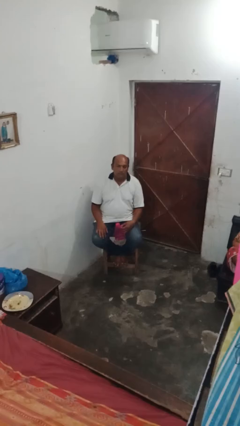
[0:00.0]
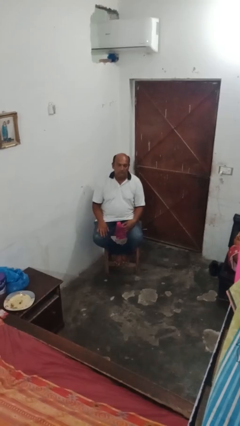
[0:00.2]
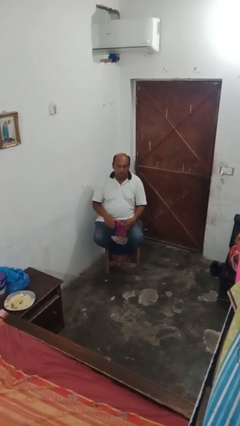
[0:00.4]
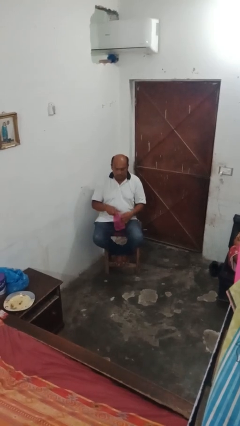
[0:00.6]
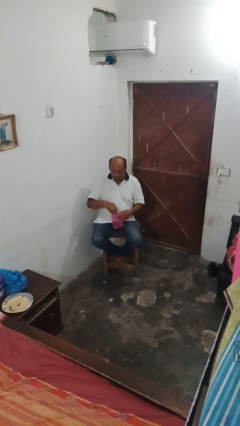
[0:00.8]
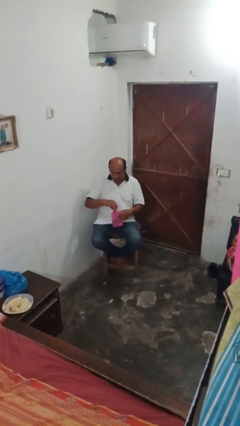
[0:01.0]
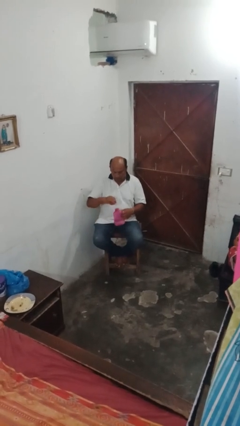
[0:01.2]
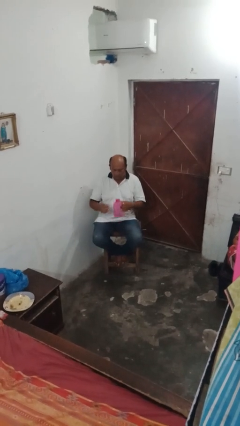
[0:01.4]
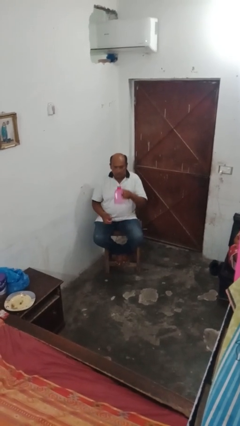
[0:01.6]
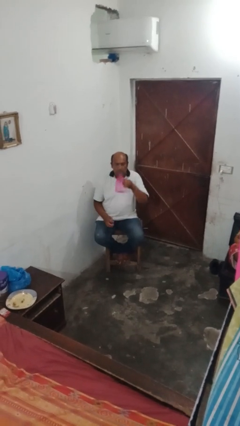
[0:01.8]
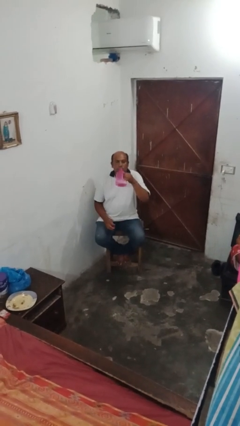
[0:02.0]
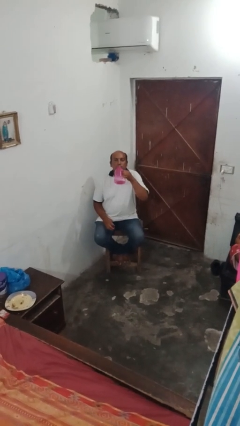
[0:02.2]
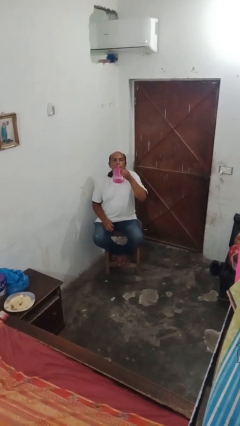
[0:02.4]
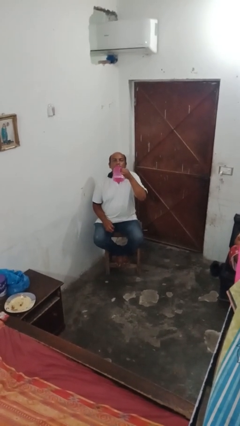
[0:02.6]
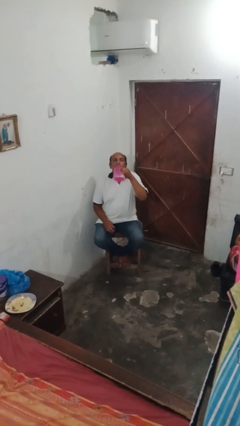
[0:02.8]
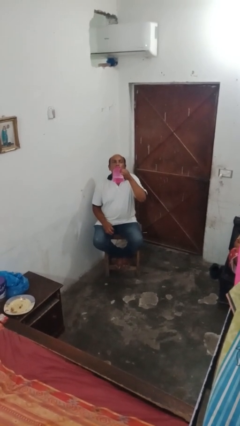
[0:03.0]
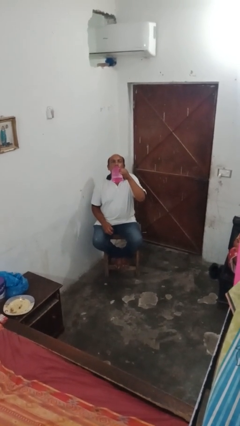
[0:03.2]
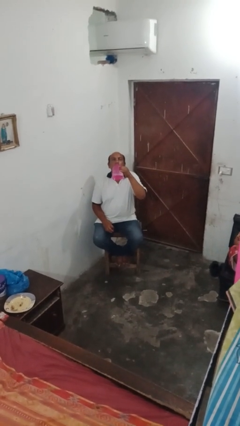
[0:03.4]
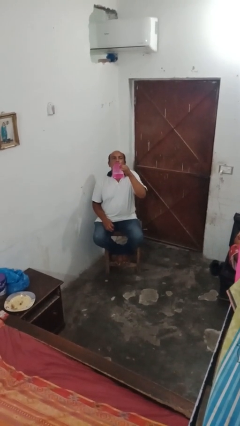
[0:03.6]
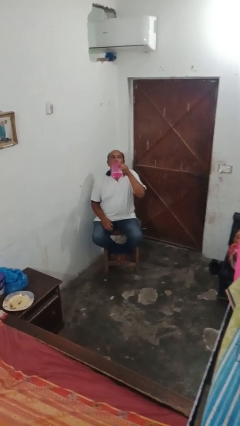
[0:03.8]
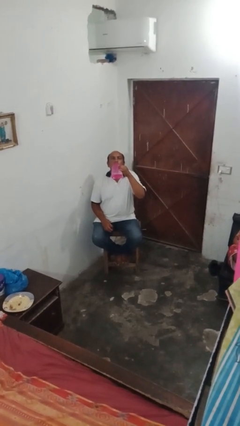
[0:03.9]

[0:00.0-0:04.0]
person drinks from bottle

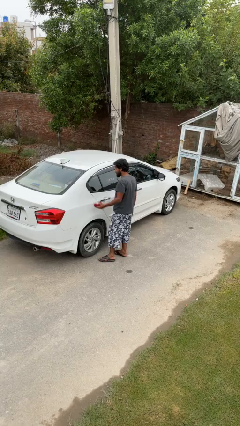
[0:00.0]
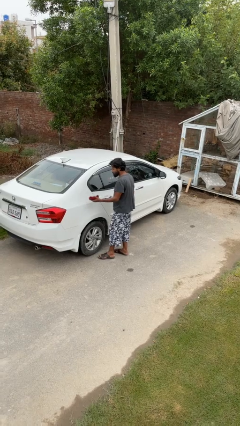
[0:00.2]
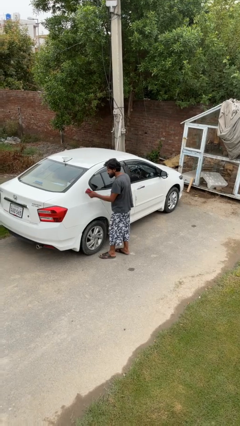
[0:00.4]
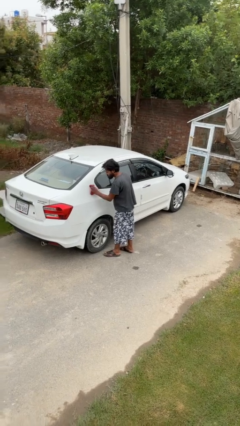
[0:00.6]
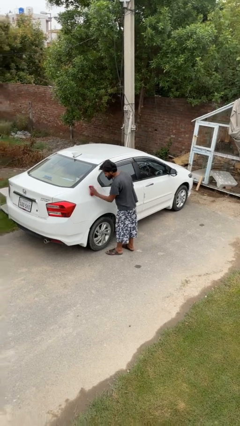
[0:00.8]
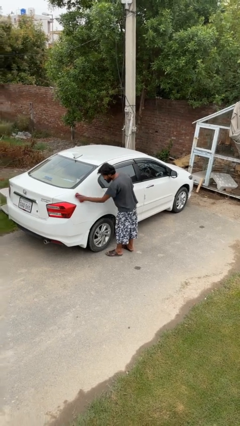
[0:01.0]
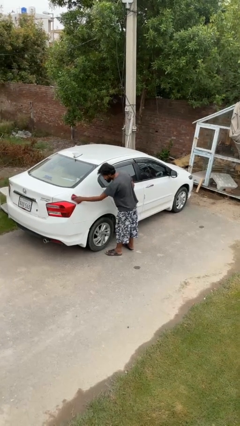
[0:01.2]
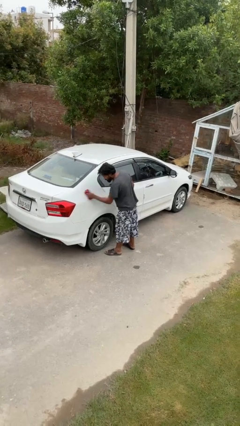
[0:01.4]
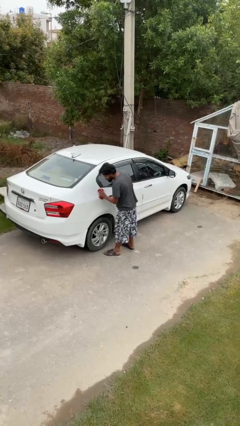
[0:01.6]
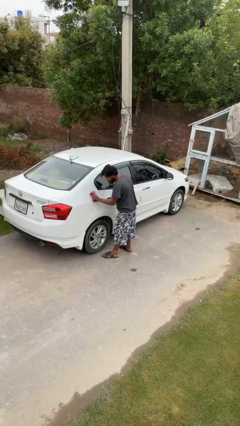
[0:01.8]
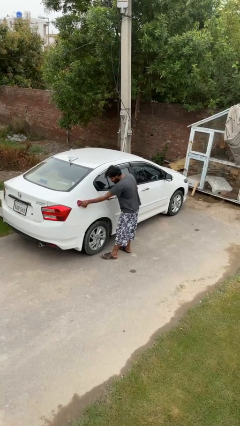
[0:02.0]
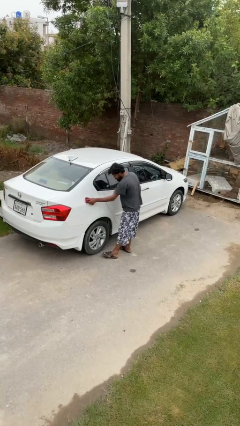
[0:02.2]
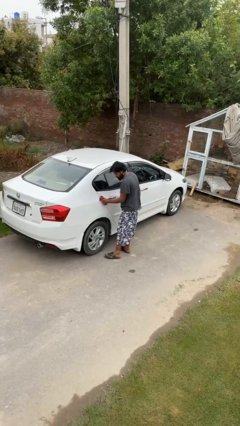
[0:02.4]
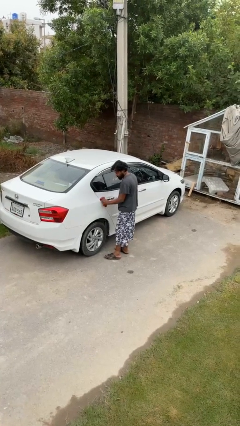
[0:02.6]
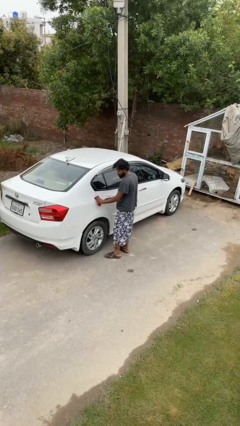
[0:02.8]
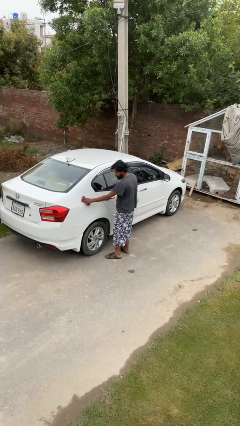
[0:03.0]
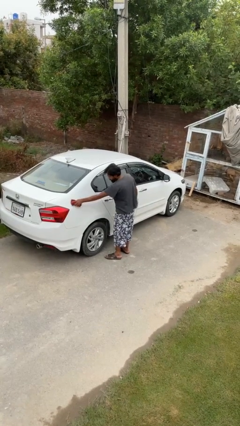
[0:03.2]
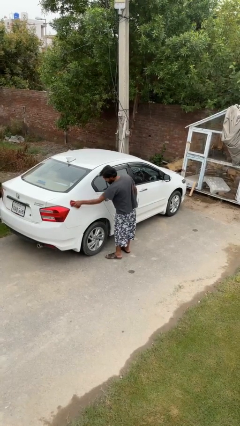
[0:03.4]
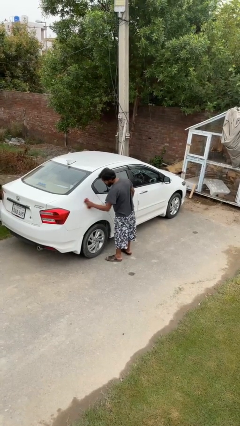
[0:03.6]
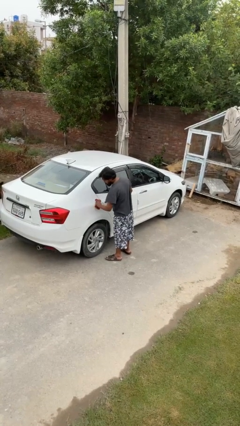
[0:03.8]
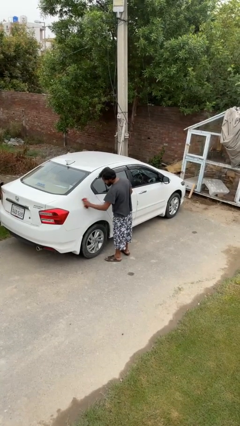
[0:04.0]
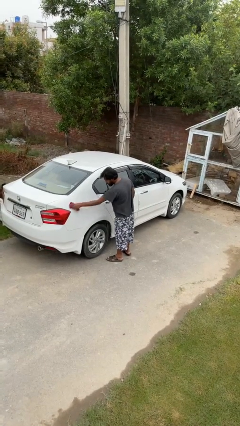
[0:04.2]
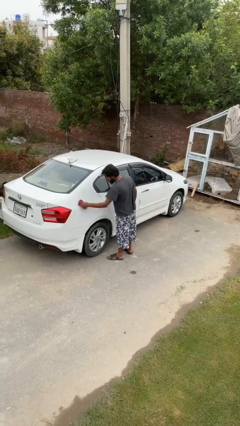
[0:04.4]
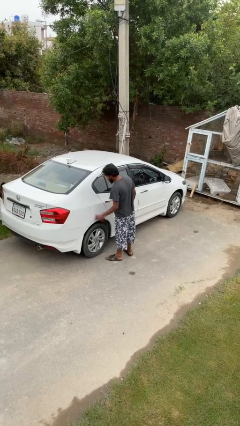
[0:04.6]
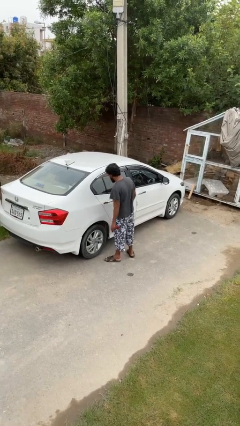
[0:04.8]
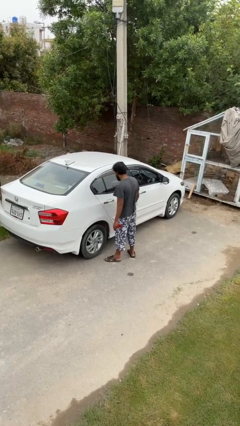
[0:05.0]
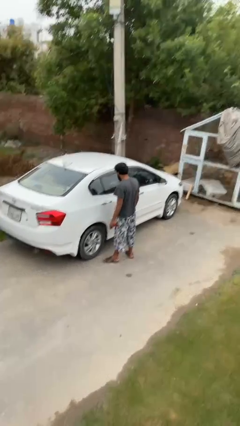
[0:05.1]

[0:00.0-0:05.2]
person polishes car with rag

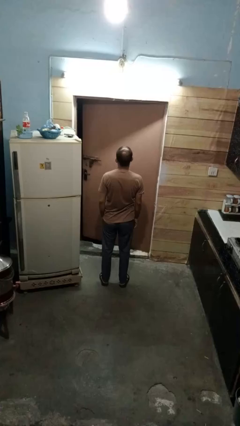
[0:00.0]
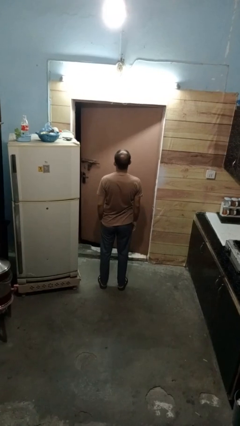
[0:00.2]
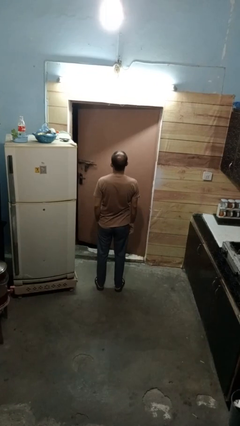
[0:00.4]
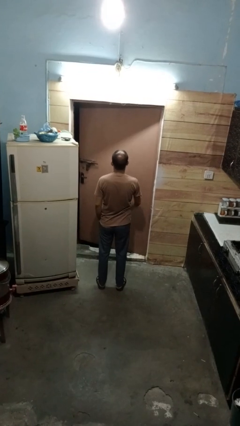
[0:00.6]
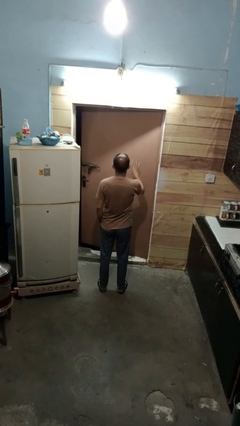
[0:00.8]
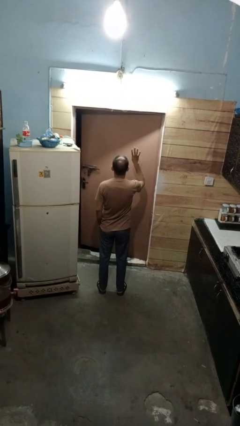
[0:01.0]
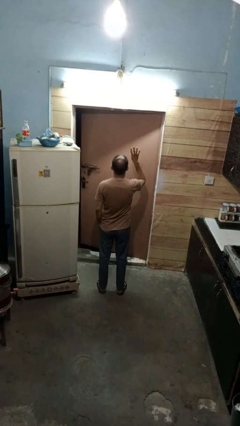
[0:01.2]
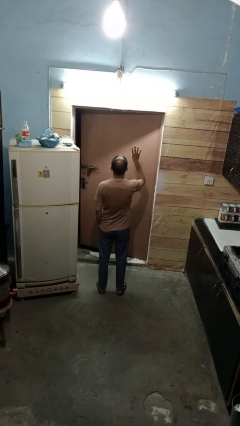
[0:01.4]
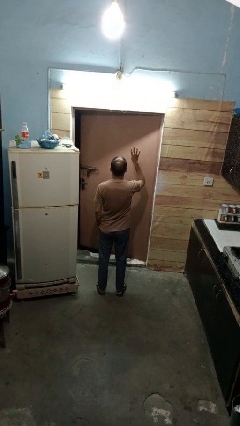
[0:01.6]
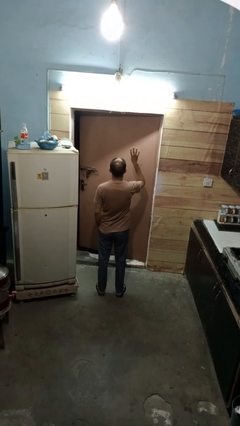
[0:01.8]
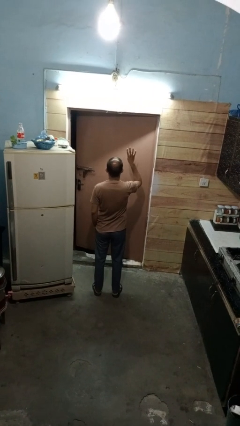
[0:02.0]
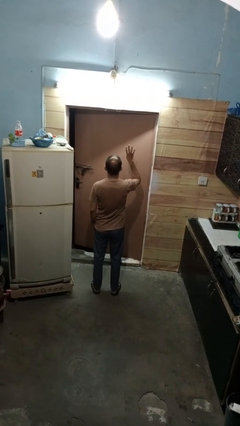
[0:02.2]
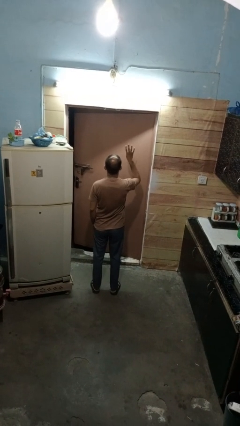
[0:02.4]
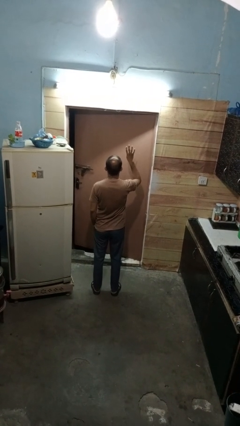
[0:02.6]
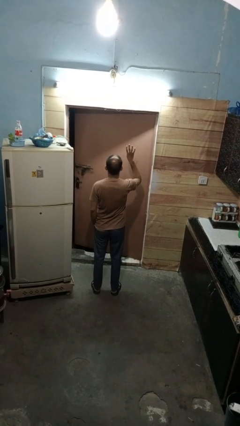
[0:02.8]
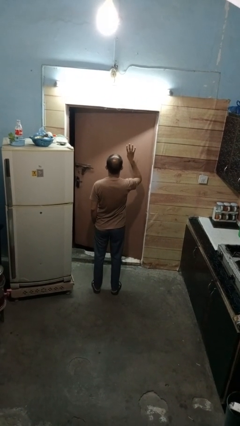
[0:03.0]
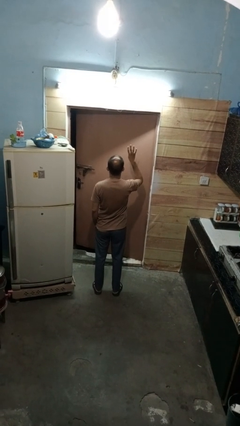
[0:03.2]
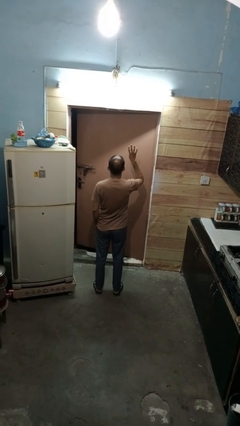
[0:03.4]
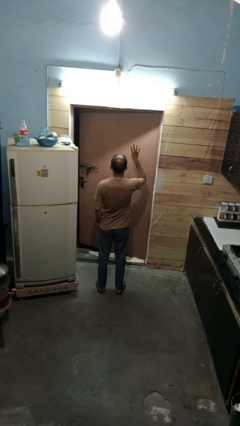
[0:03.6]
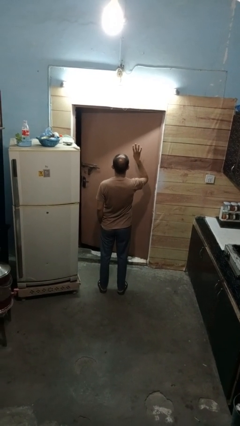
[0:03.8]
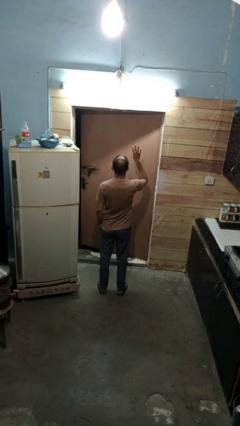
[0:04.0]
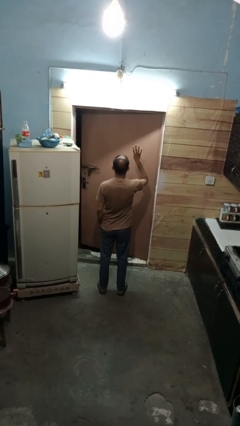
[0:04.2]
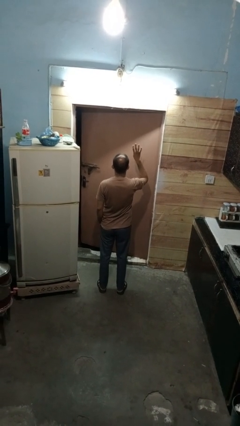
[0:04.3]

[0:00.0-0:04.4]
person gestures number four

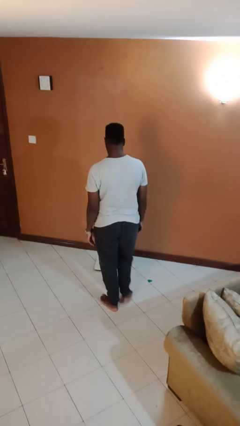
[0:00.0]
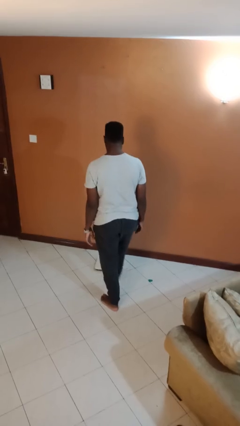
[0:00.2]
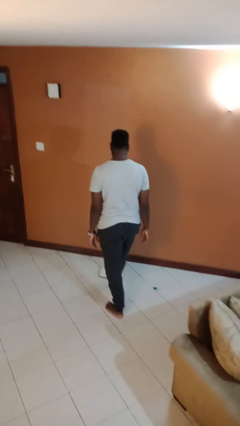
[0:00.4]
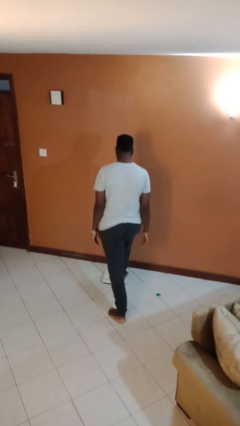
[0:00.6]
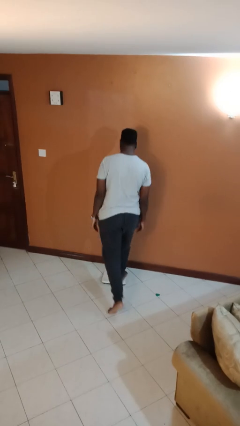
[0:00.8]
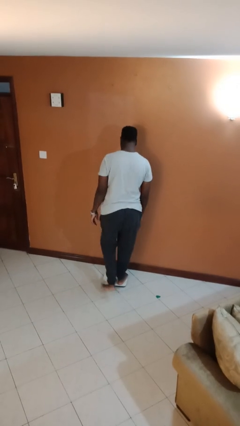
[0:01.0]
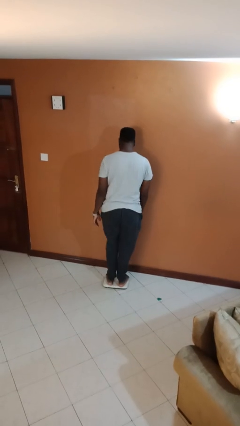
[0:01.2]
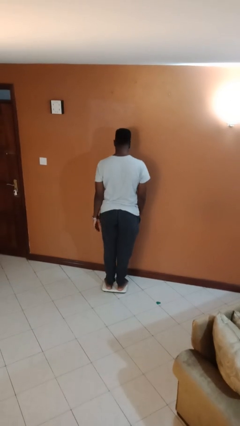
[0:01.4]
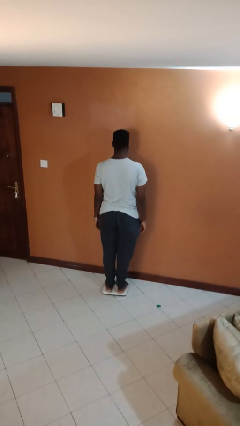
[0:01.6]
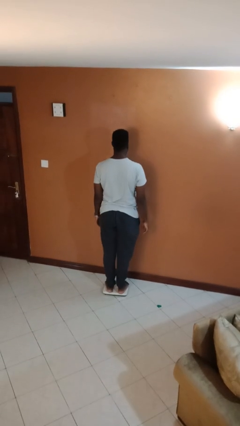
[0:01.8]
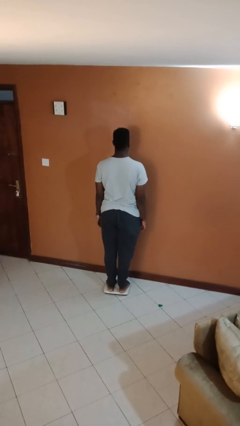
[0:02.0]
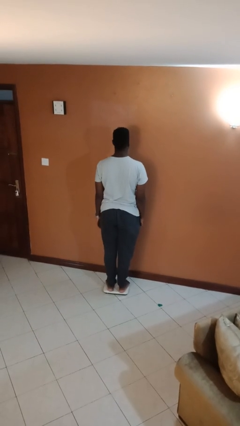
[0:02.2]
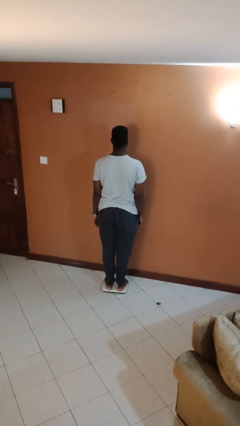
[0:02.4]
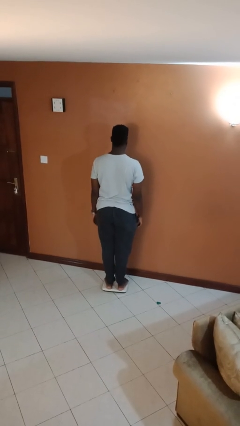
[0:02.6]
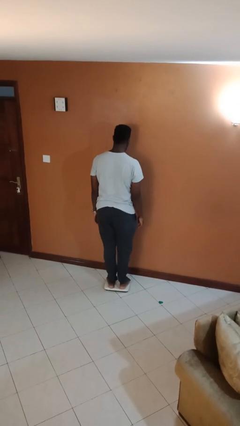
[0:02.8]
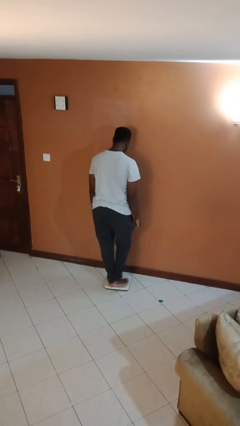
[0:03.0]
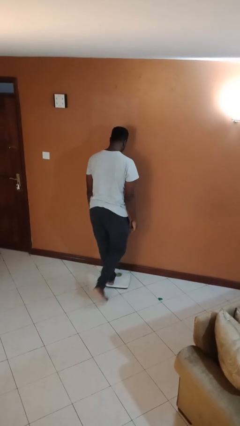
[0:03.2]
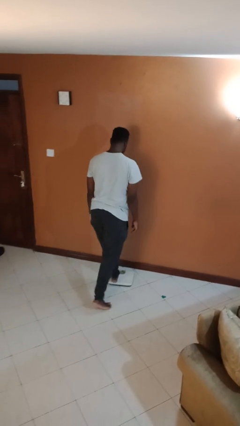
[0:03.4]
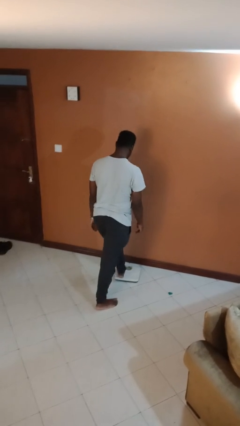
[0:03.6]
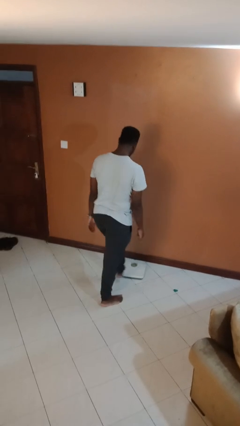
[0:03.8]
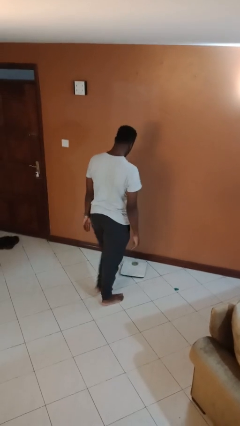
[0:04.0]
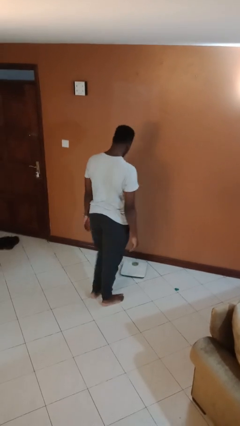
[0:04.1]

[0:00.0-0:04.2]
person uses bodyweight scale

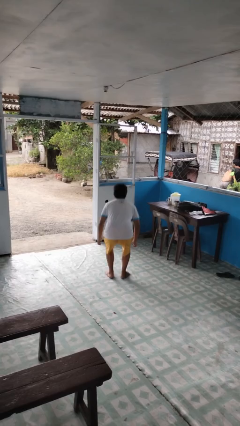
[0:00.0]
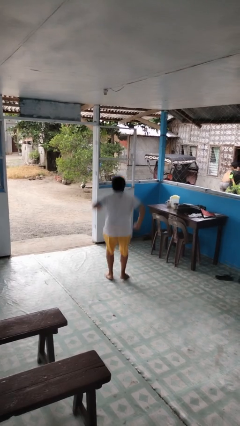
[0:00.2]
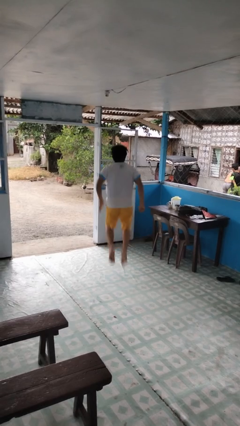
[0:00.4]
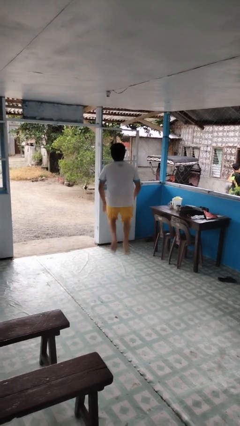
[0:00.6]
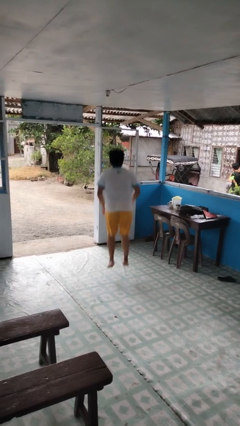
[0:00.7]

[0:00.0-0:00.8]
person jumps
